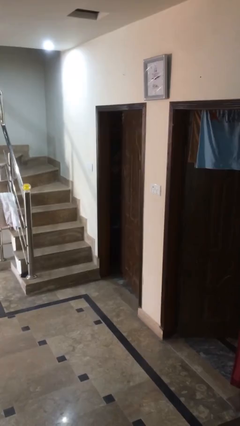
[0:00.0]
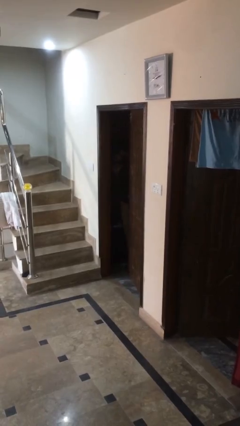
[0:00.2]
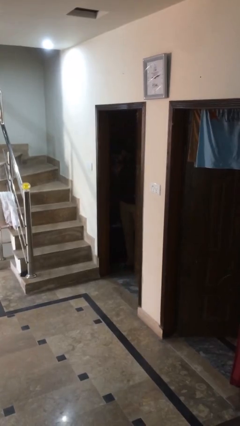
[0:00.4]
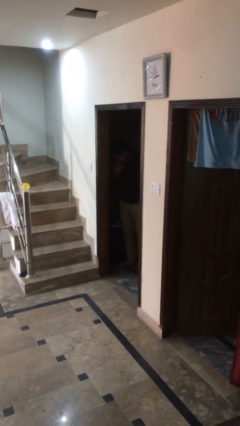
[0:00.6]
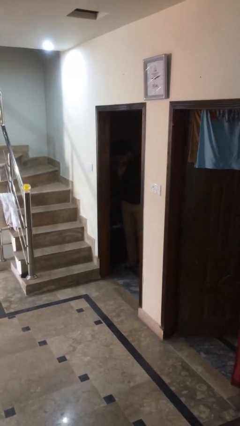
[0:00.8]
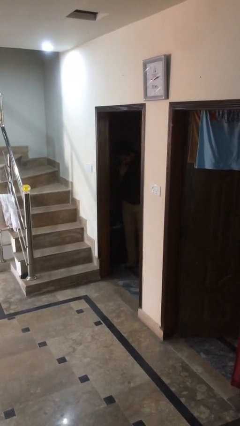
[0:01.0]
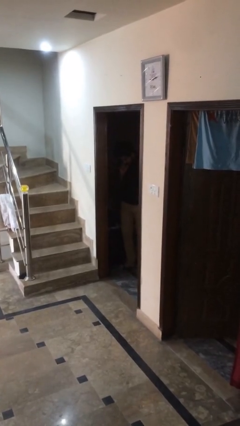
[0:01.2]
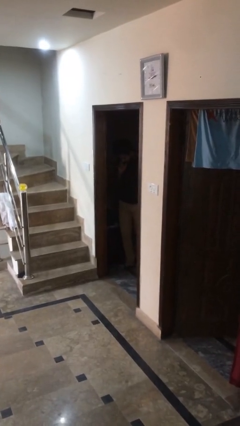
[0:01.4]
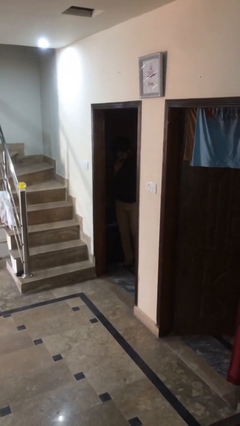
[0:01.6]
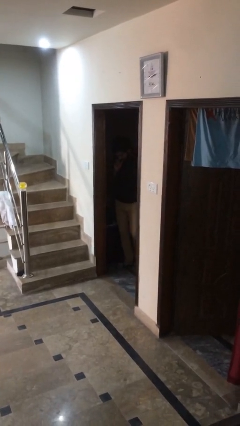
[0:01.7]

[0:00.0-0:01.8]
person opens facility door

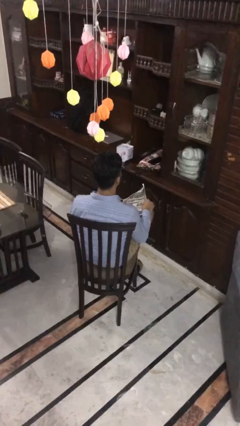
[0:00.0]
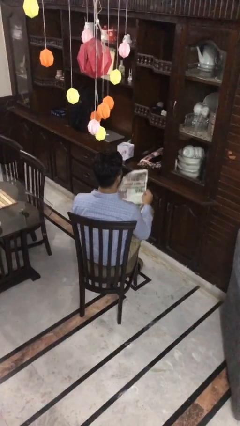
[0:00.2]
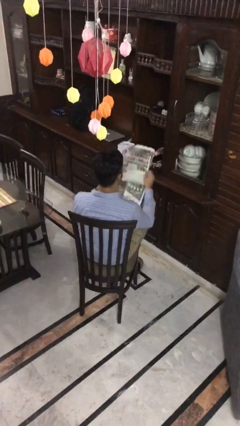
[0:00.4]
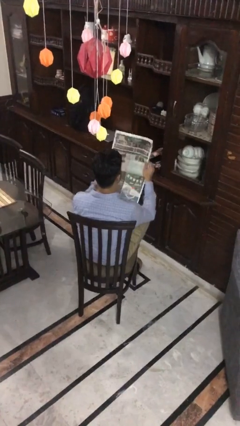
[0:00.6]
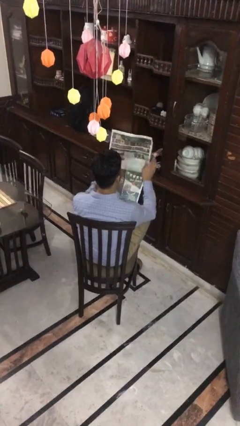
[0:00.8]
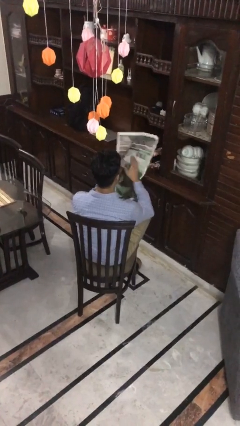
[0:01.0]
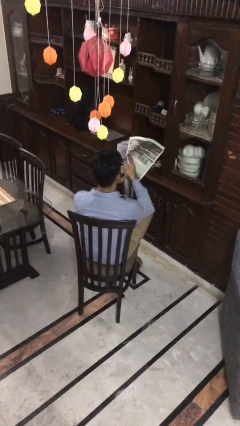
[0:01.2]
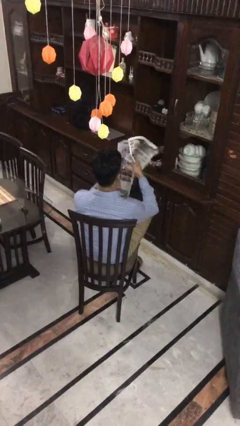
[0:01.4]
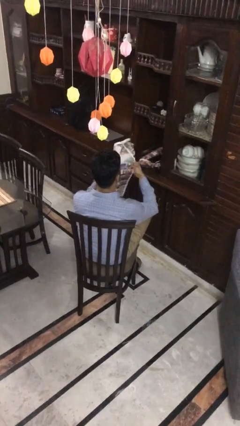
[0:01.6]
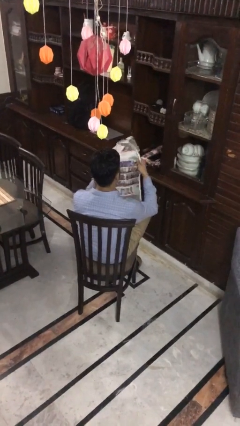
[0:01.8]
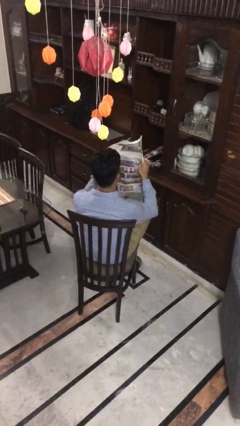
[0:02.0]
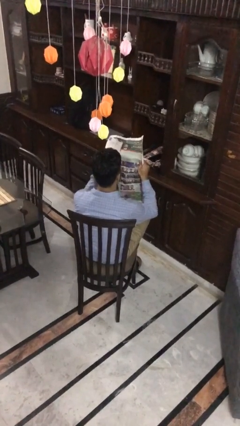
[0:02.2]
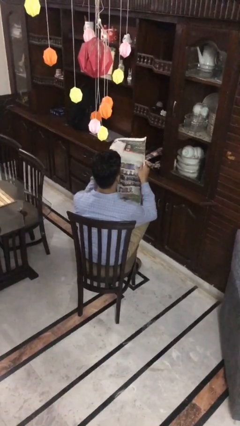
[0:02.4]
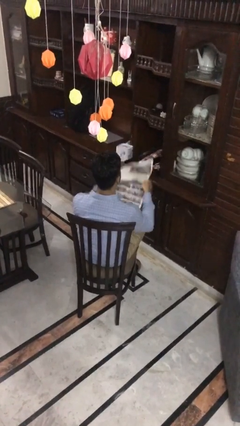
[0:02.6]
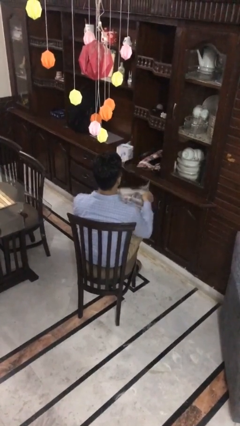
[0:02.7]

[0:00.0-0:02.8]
person reads newspaper

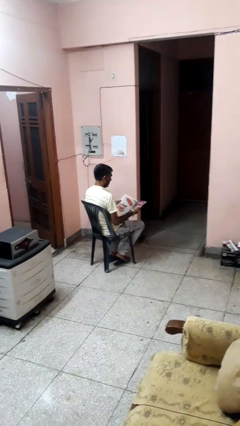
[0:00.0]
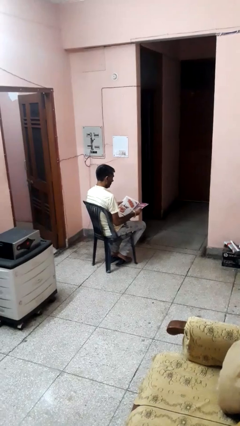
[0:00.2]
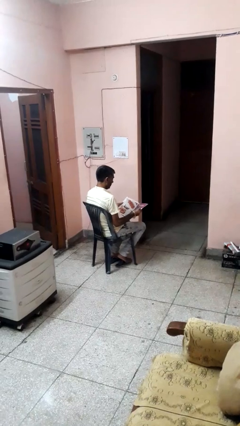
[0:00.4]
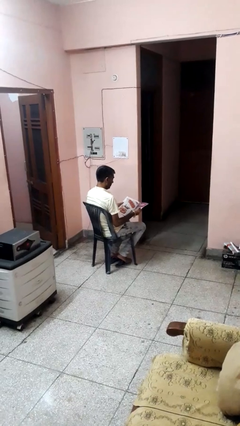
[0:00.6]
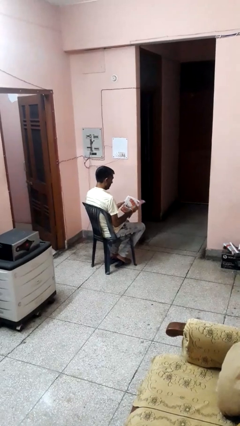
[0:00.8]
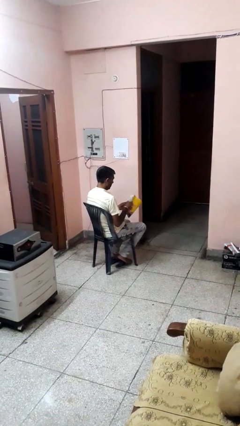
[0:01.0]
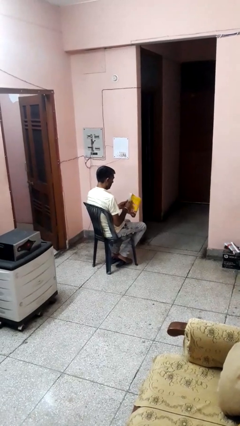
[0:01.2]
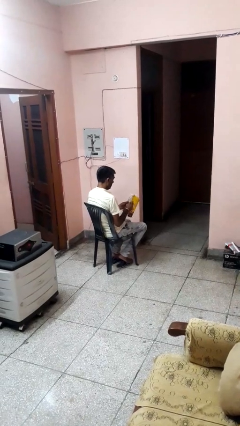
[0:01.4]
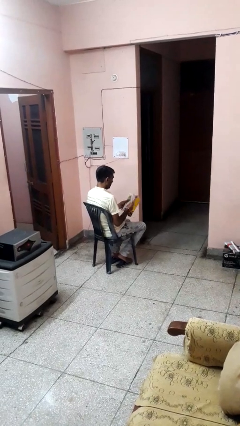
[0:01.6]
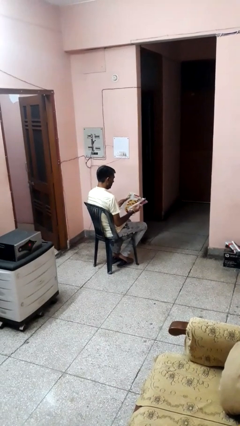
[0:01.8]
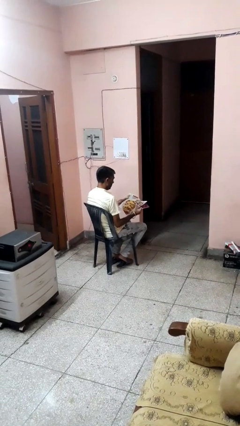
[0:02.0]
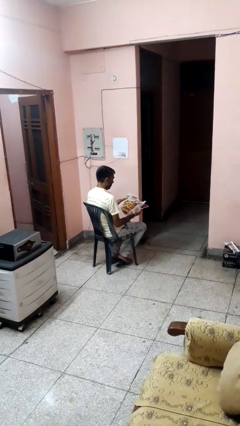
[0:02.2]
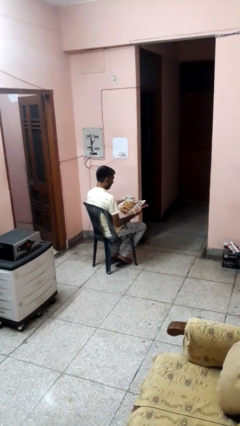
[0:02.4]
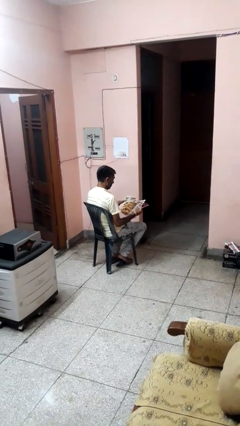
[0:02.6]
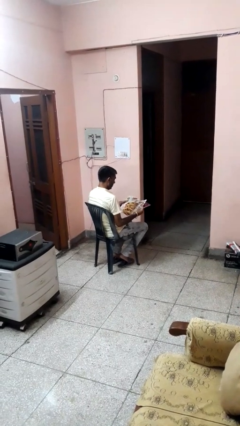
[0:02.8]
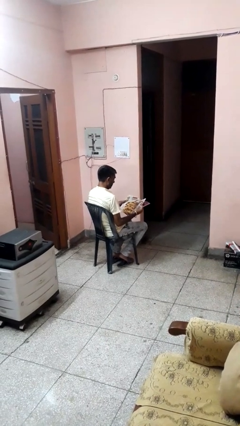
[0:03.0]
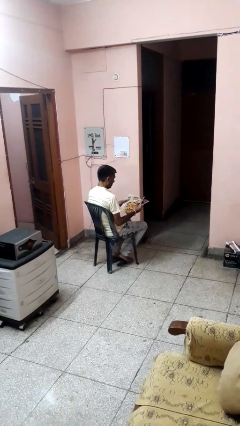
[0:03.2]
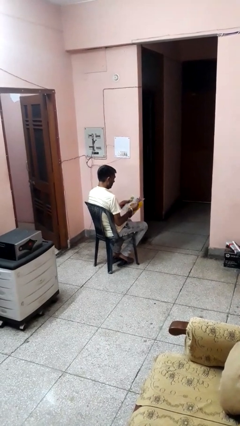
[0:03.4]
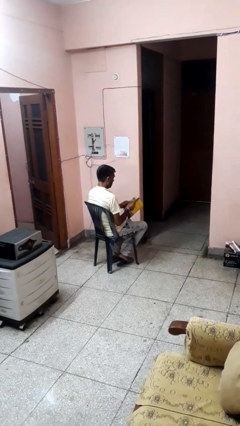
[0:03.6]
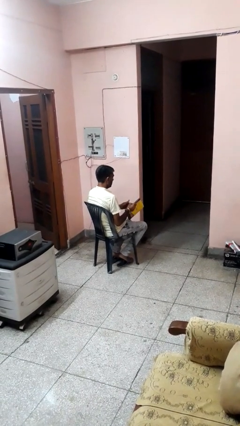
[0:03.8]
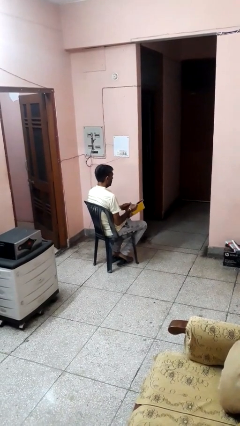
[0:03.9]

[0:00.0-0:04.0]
person reads magazine

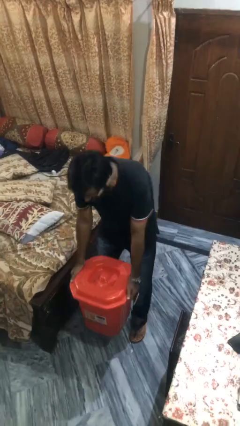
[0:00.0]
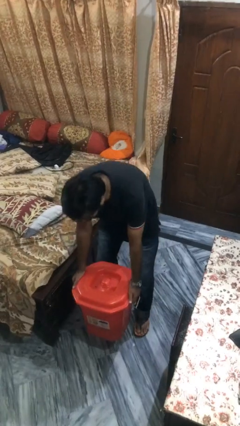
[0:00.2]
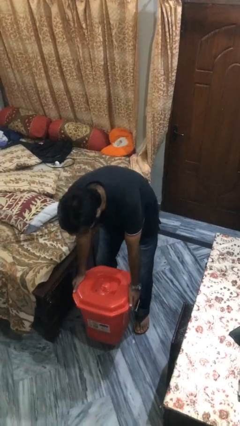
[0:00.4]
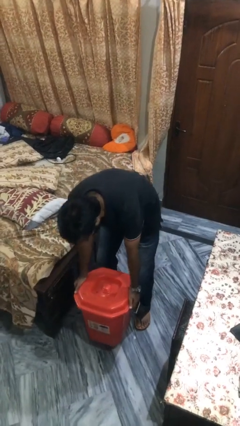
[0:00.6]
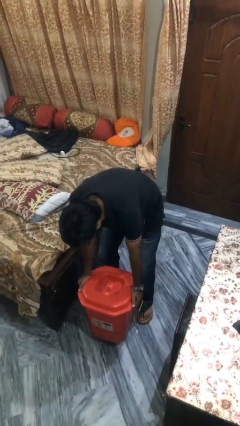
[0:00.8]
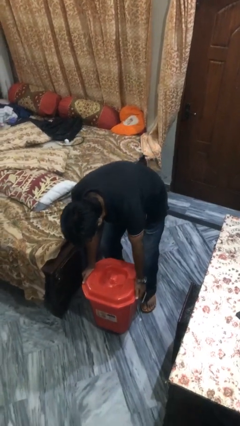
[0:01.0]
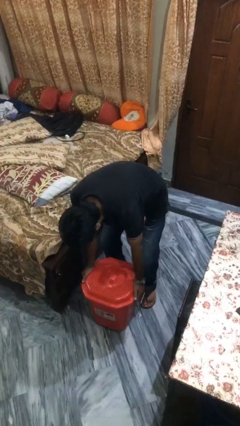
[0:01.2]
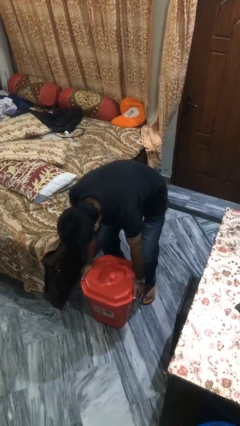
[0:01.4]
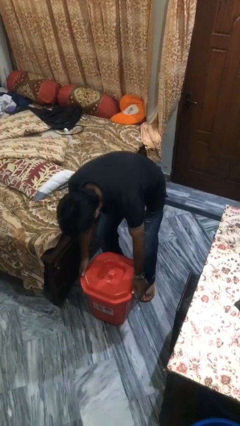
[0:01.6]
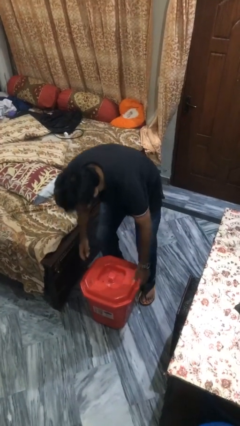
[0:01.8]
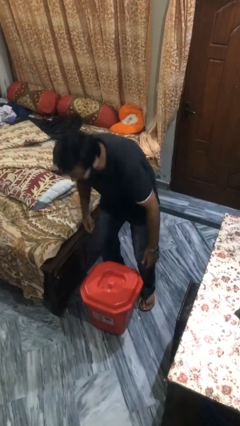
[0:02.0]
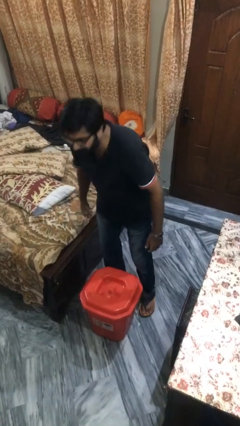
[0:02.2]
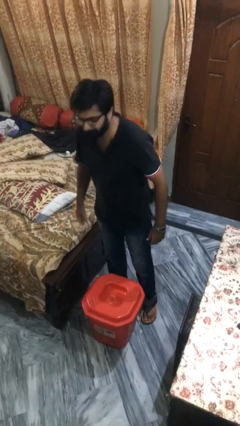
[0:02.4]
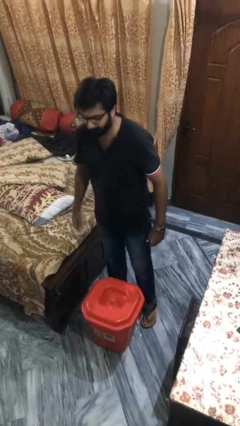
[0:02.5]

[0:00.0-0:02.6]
person puts down object on floor

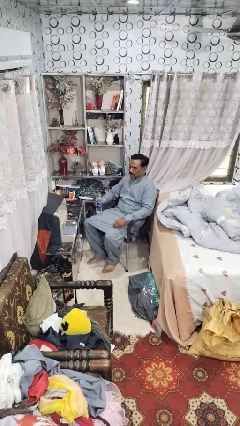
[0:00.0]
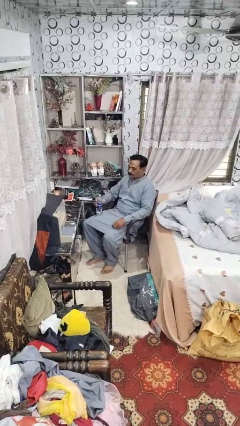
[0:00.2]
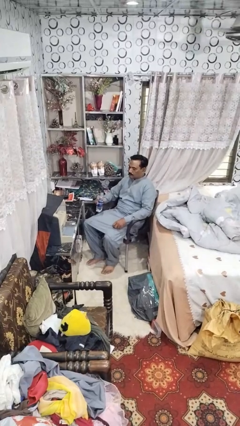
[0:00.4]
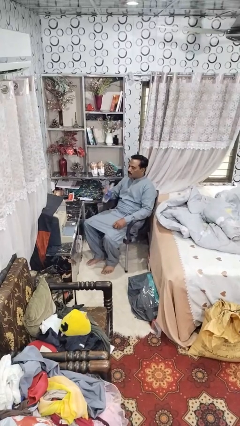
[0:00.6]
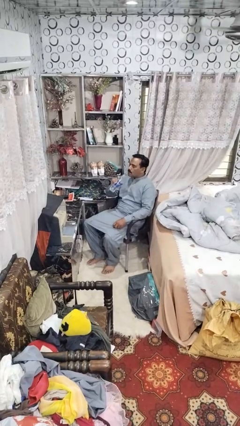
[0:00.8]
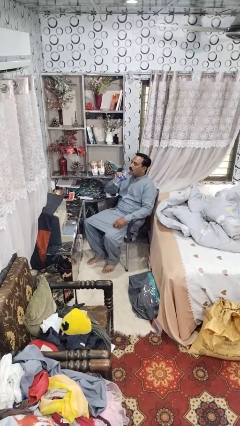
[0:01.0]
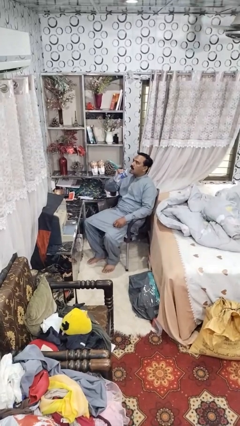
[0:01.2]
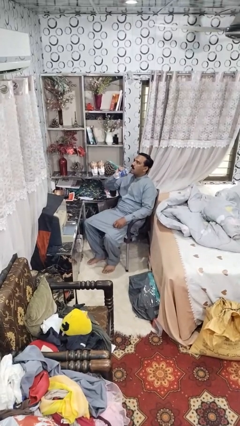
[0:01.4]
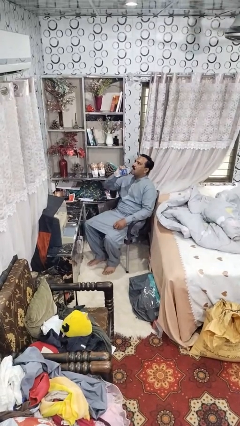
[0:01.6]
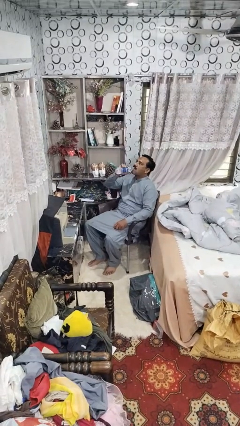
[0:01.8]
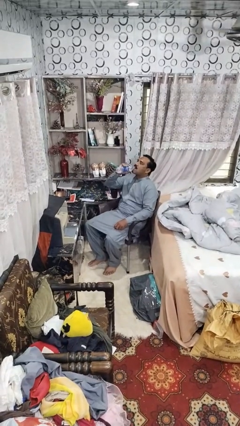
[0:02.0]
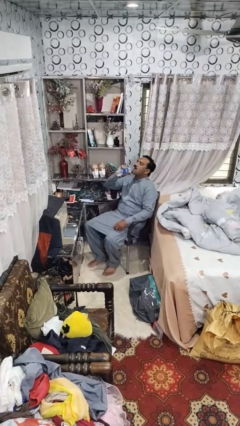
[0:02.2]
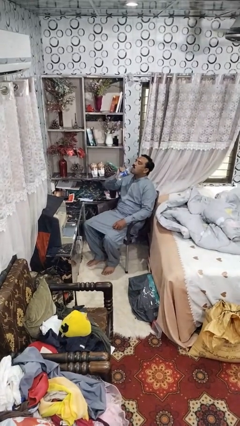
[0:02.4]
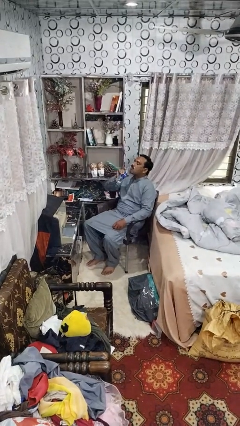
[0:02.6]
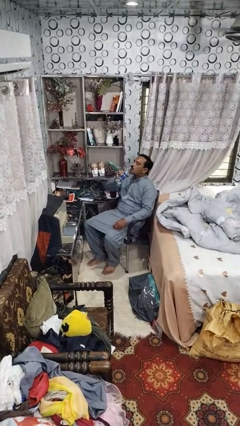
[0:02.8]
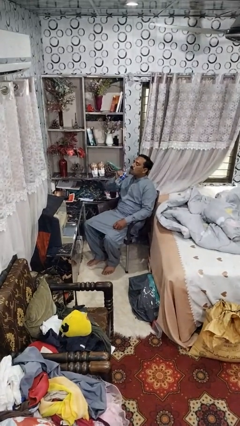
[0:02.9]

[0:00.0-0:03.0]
person drinks from bottle

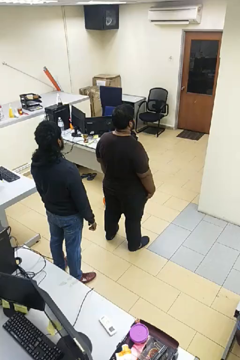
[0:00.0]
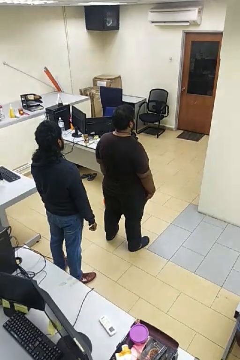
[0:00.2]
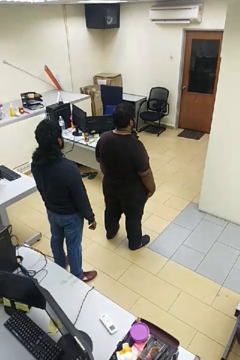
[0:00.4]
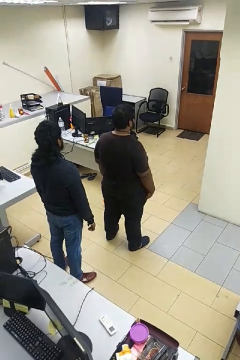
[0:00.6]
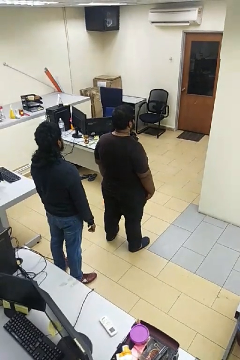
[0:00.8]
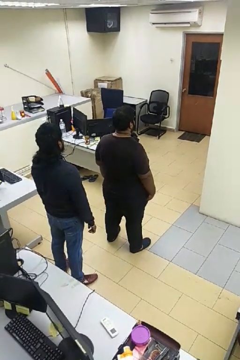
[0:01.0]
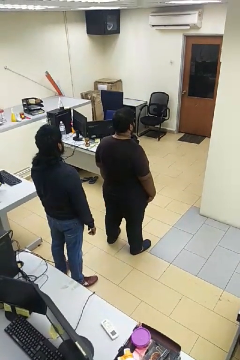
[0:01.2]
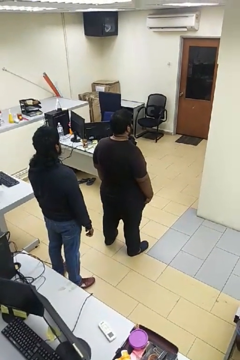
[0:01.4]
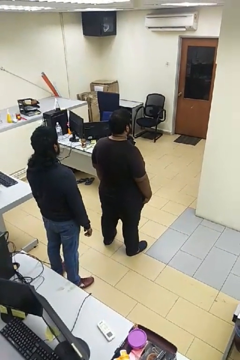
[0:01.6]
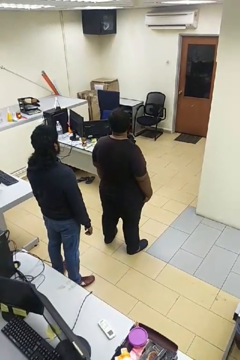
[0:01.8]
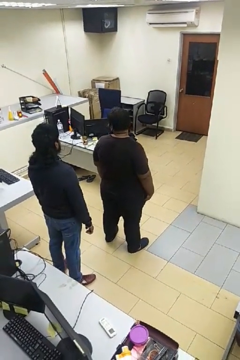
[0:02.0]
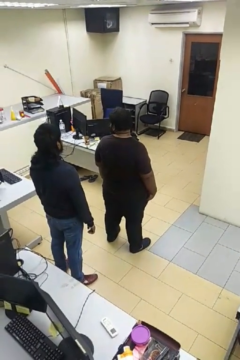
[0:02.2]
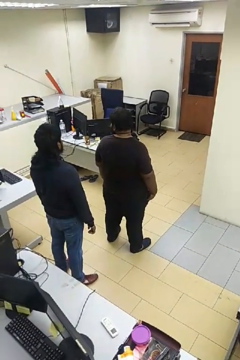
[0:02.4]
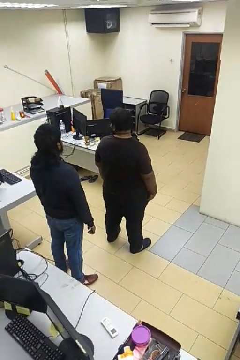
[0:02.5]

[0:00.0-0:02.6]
person looks over shoulder

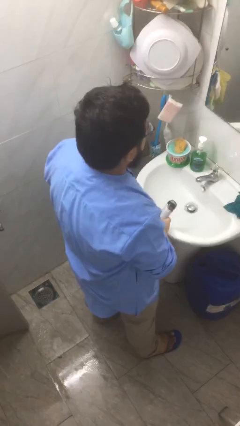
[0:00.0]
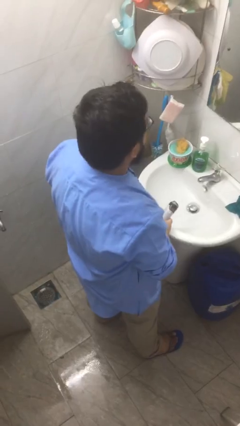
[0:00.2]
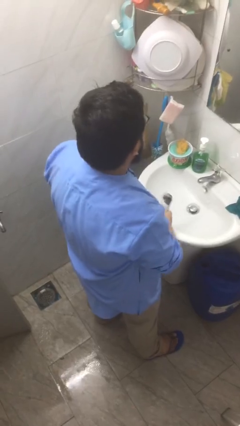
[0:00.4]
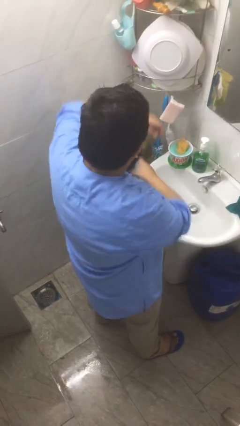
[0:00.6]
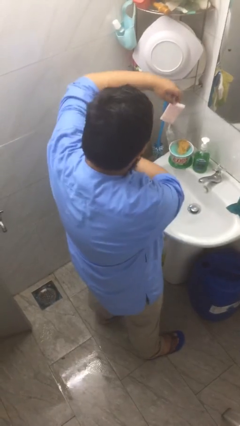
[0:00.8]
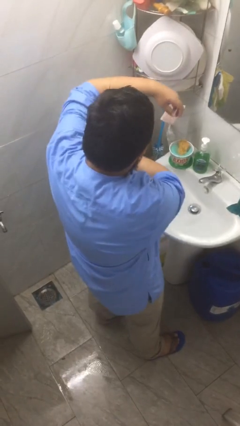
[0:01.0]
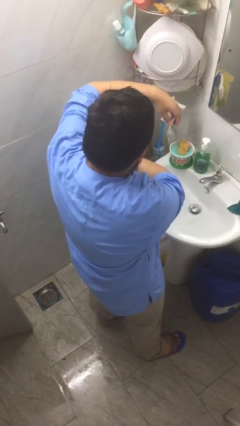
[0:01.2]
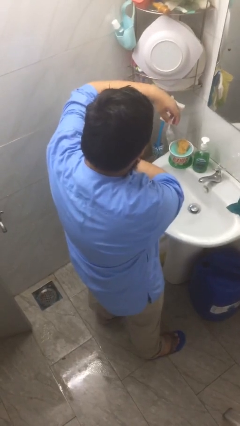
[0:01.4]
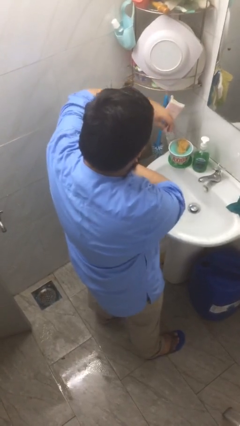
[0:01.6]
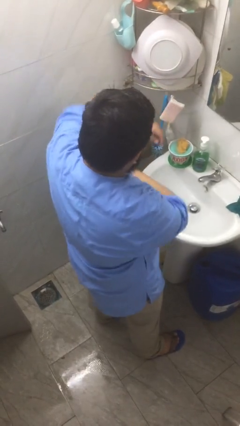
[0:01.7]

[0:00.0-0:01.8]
person applies deodorant
